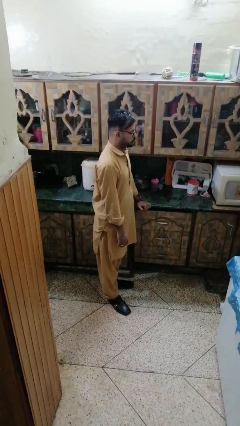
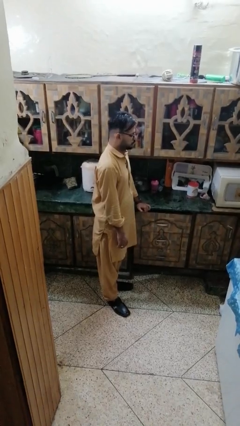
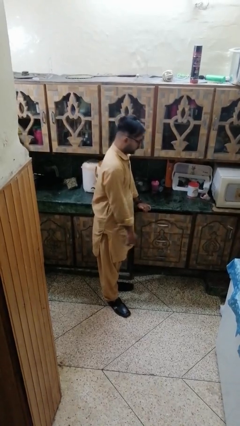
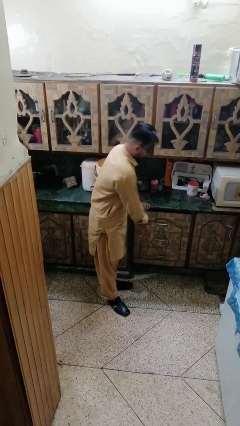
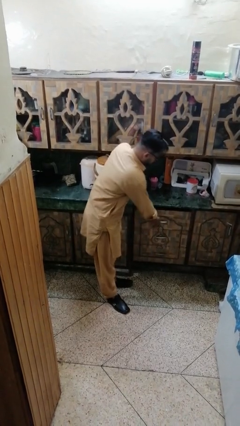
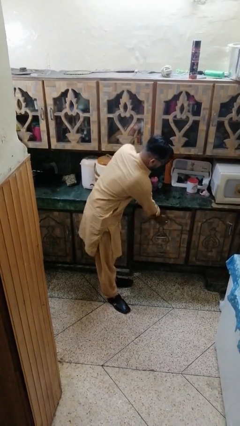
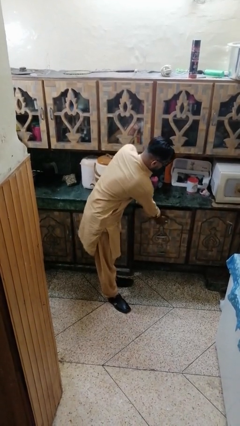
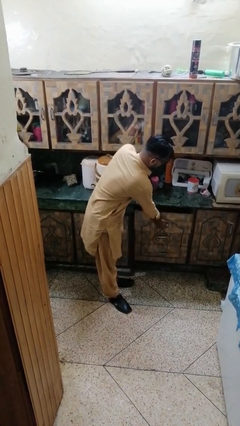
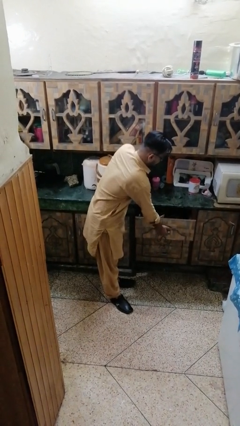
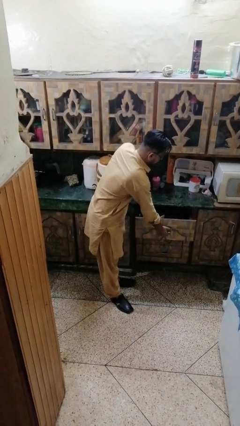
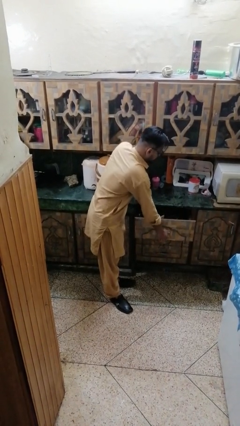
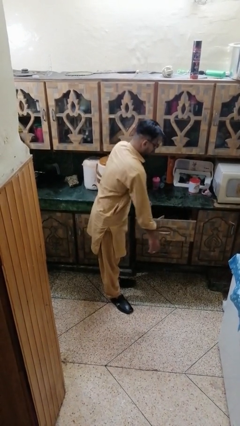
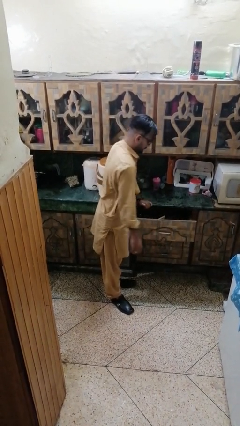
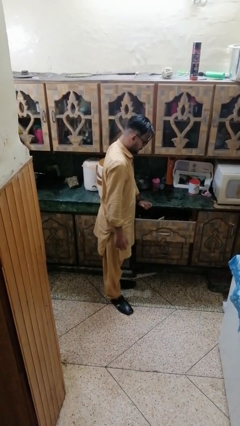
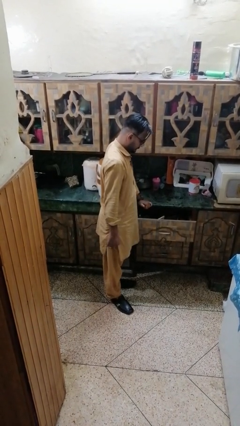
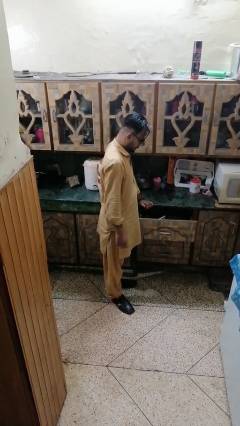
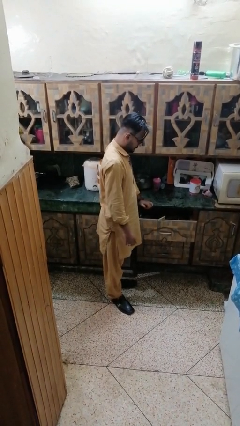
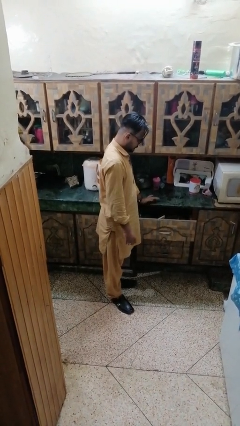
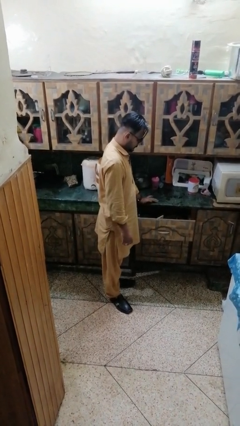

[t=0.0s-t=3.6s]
person opens kitchen drawer

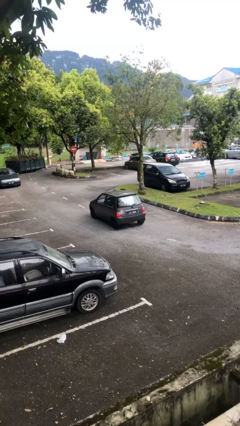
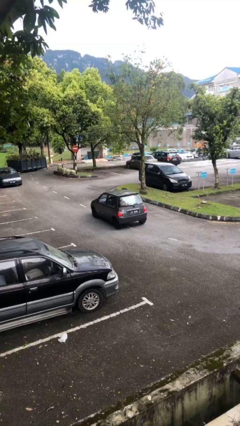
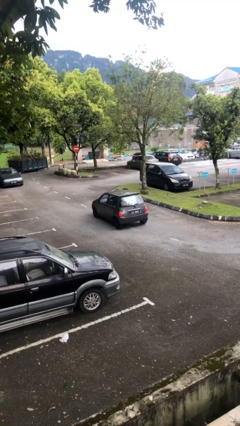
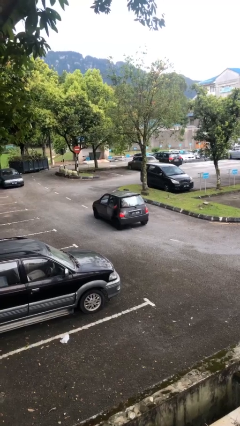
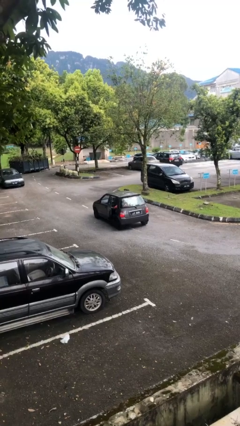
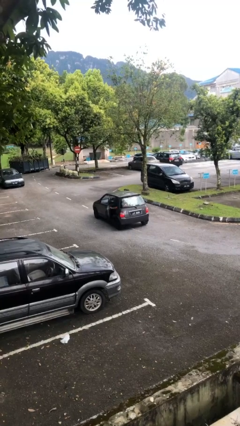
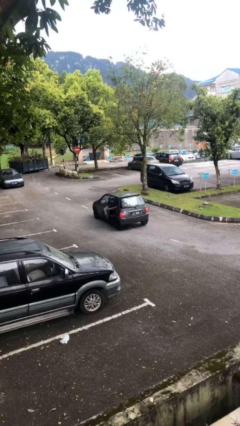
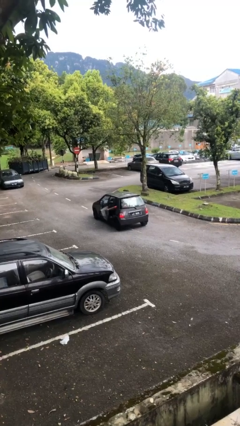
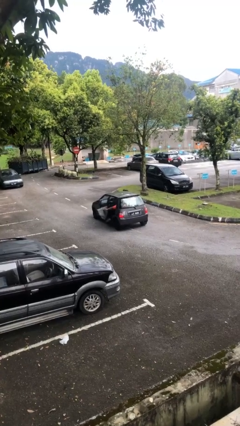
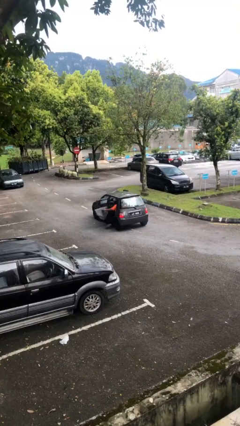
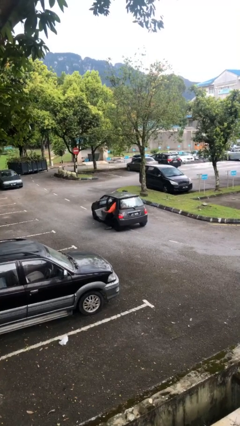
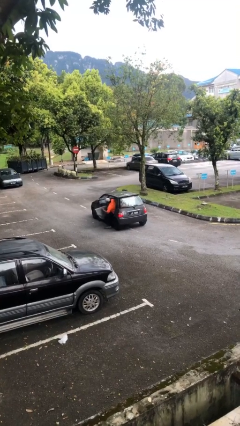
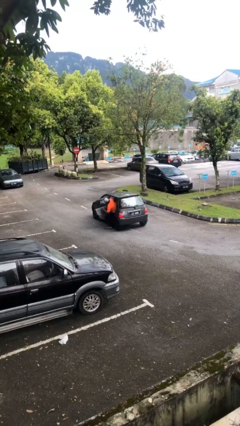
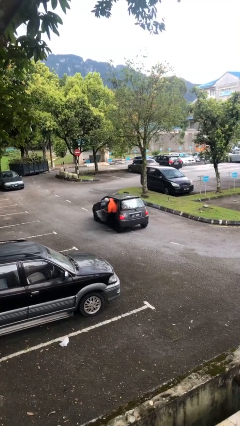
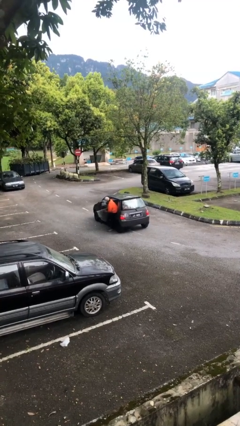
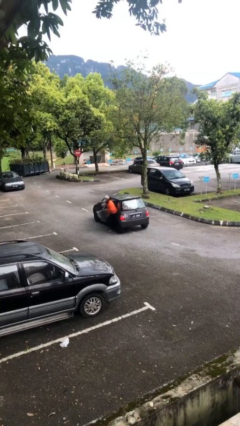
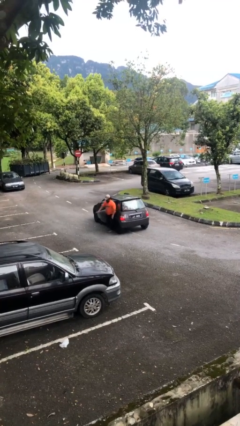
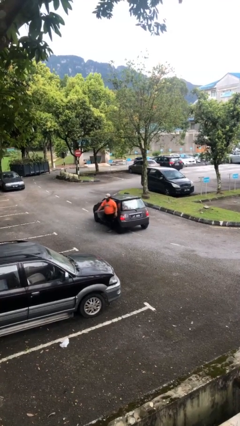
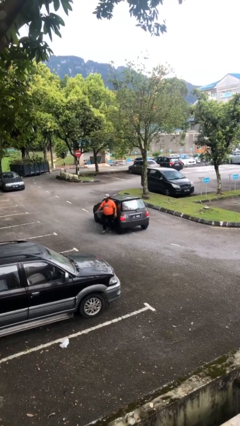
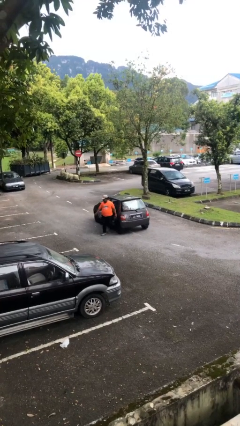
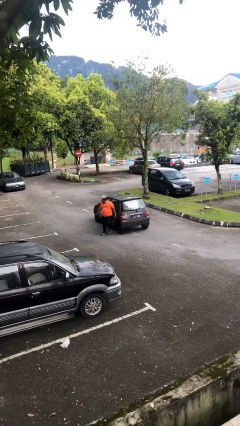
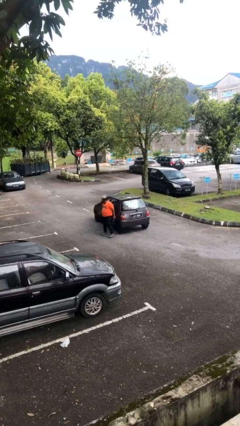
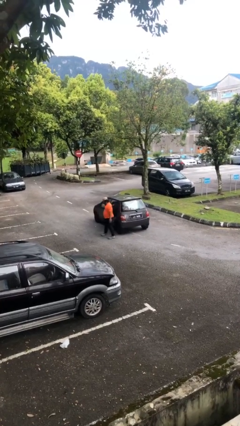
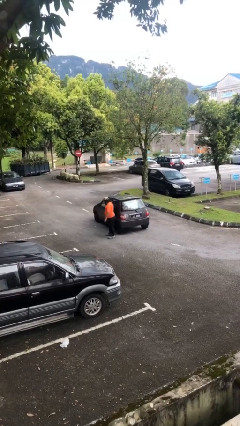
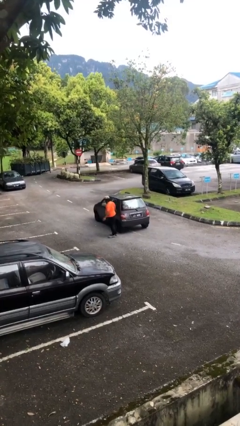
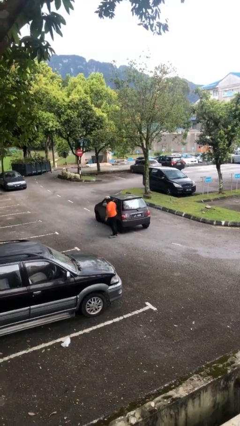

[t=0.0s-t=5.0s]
car drops off person

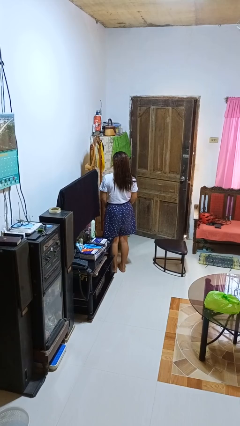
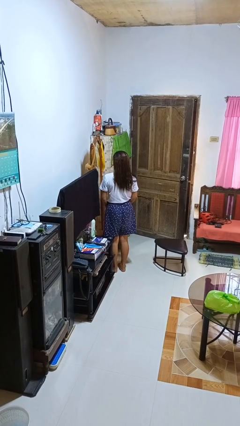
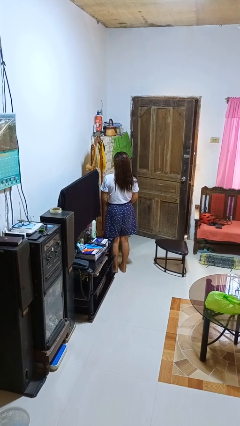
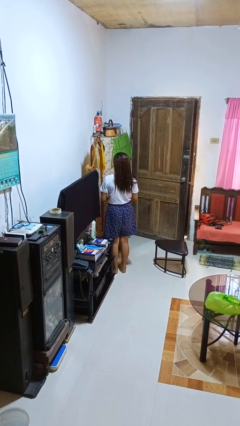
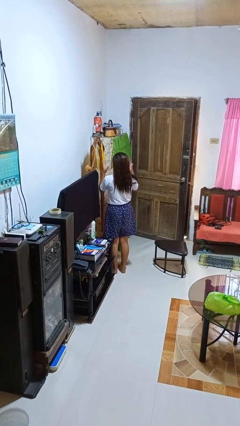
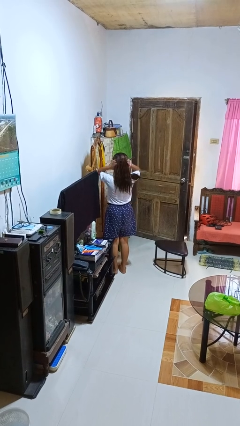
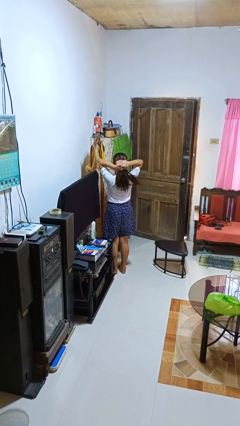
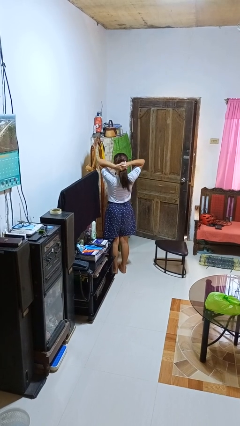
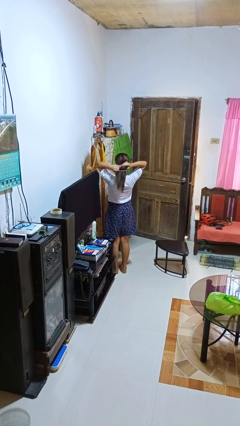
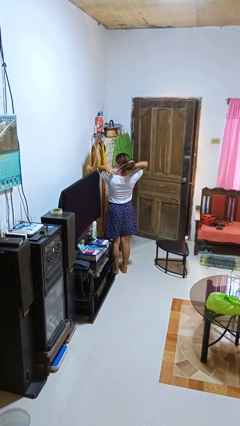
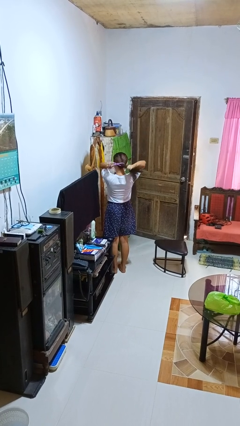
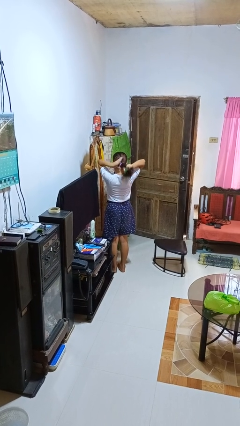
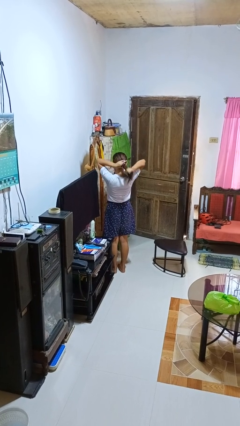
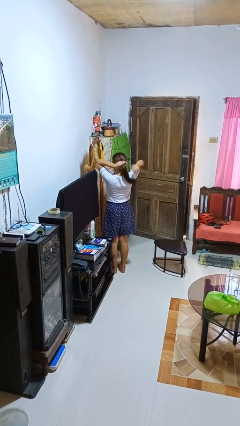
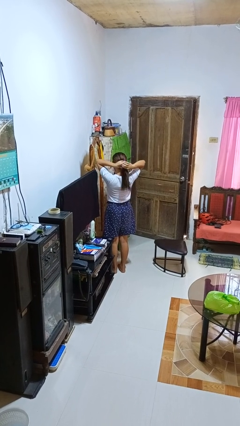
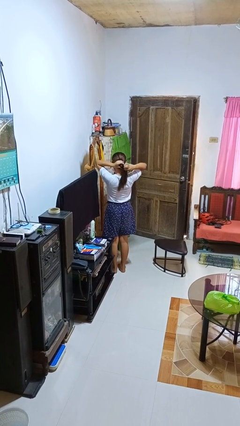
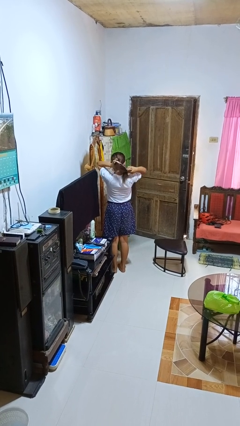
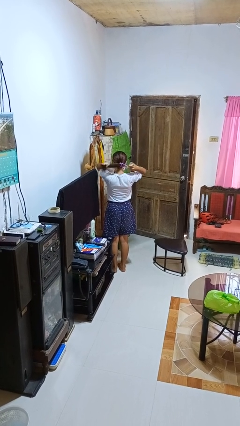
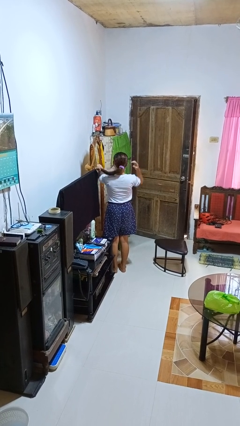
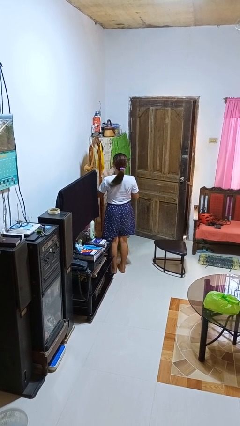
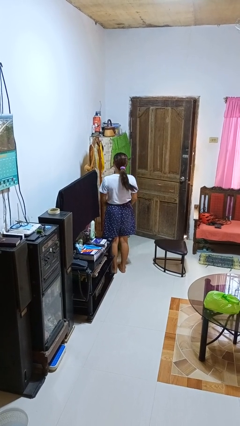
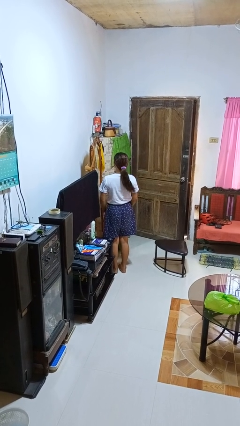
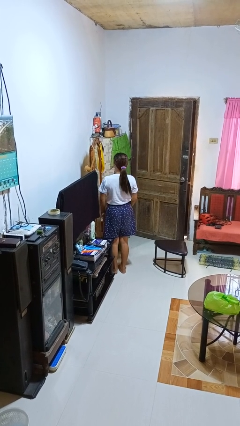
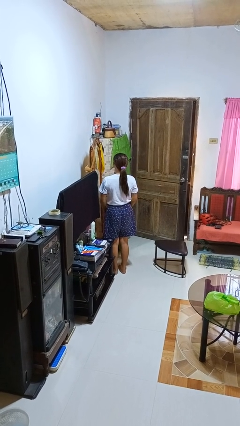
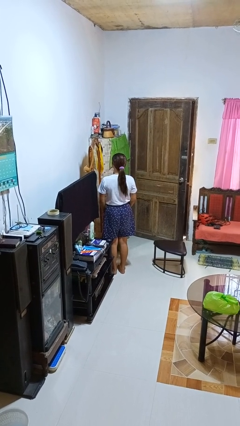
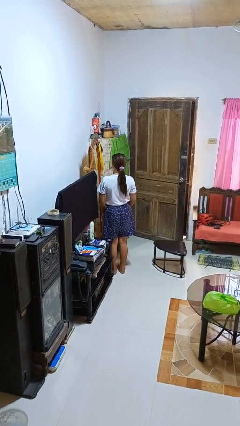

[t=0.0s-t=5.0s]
person puts hair in ponytail

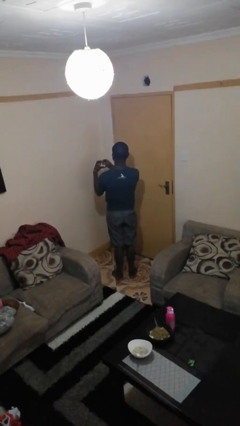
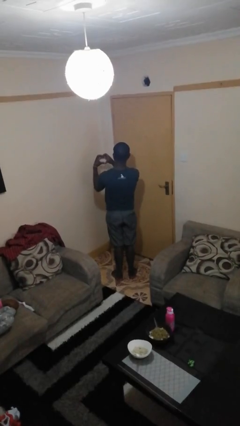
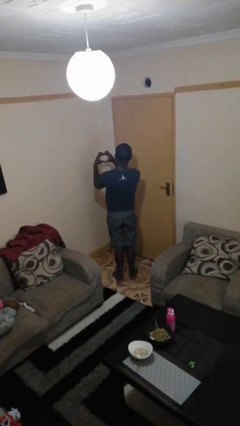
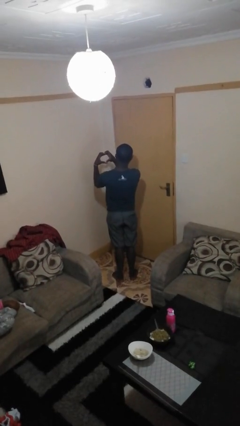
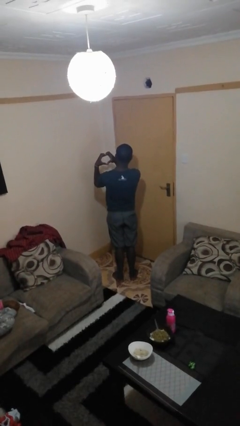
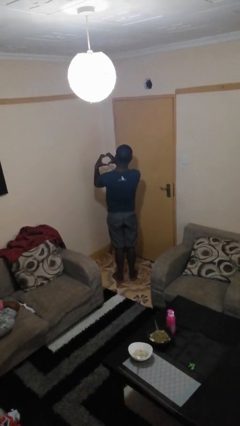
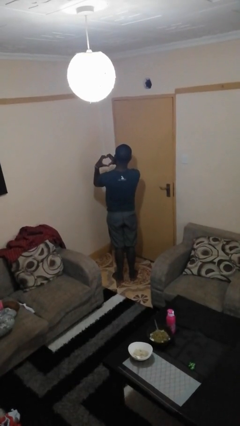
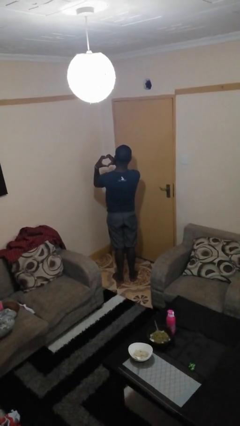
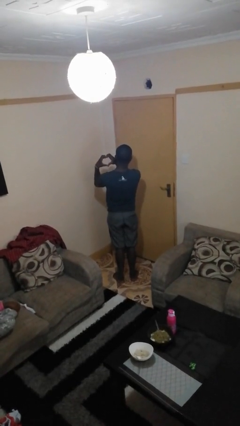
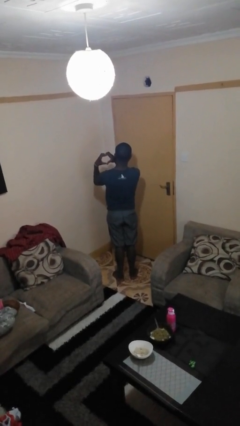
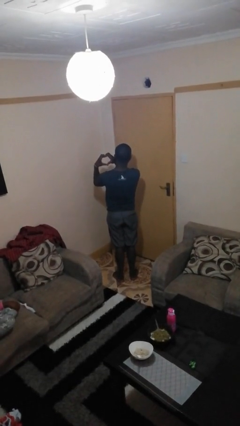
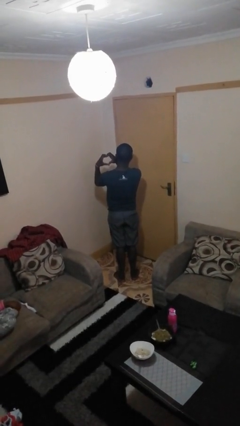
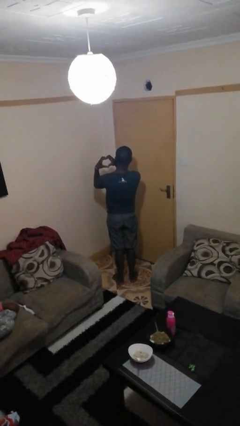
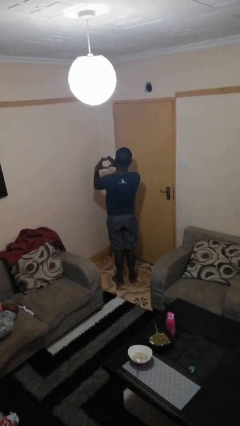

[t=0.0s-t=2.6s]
person gestures heart

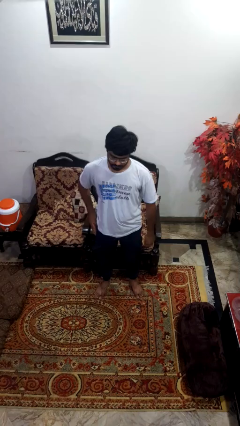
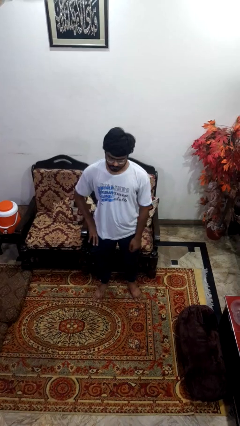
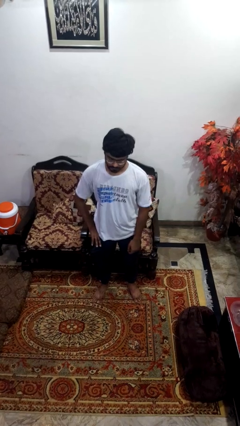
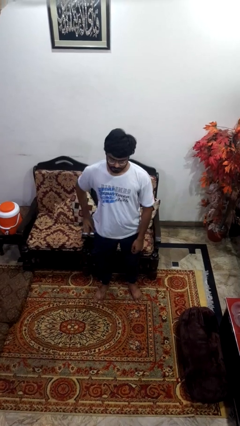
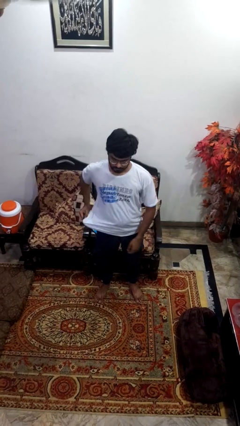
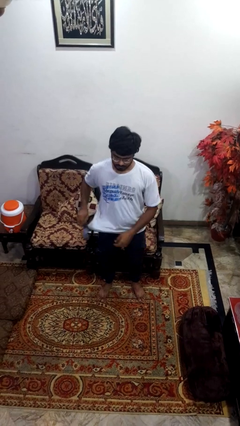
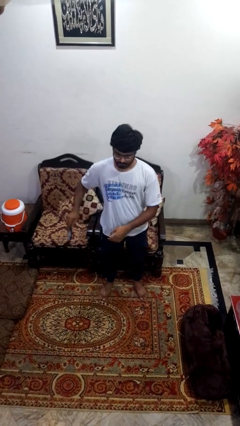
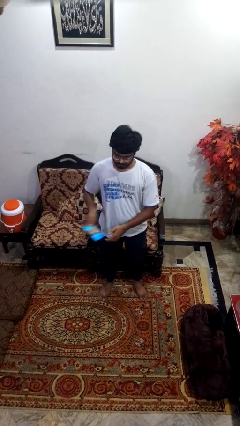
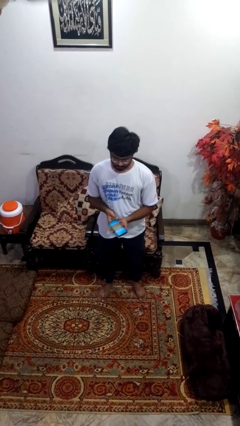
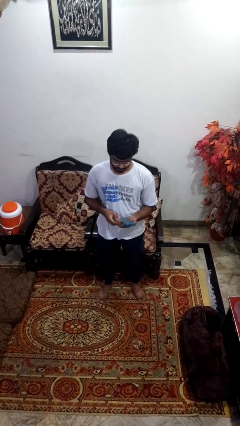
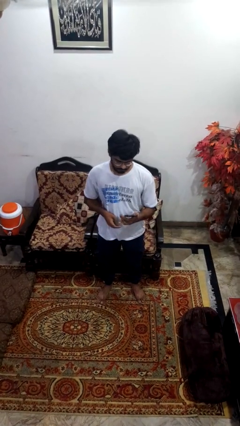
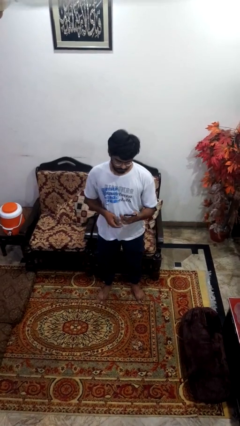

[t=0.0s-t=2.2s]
person takes phone from pocket
